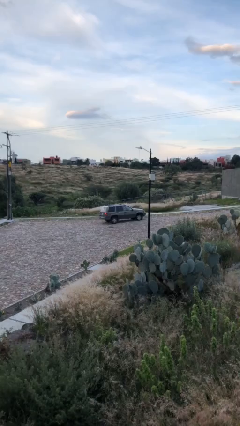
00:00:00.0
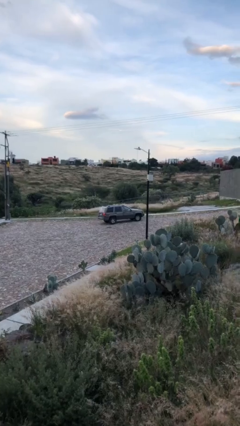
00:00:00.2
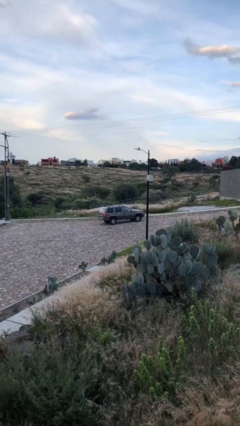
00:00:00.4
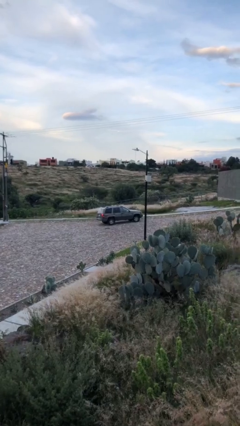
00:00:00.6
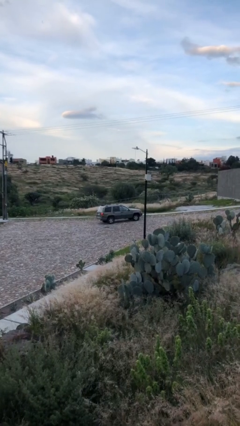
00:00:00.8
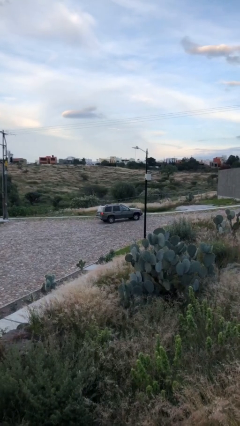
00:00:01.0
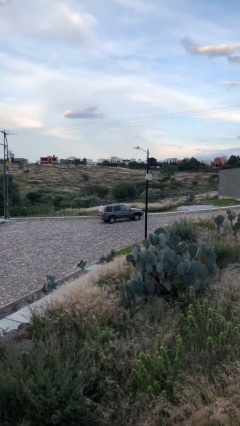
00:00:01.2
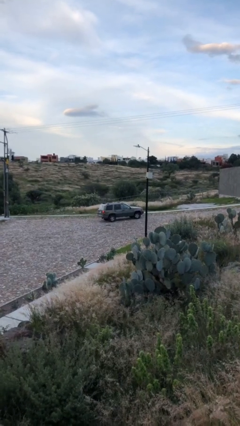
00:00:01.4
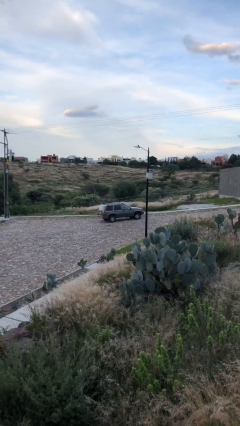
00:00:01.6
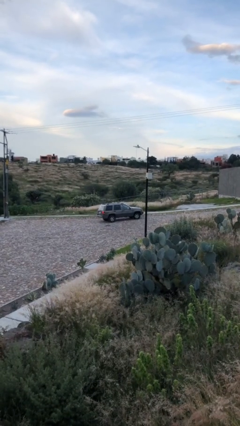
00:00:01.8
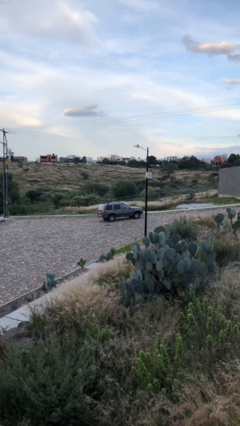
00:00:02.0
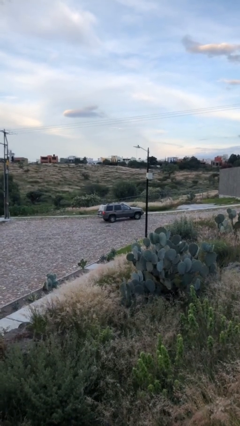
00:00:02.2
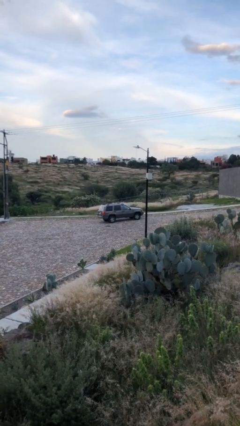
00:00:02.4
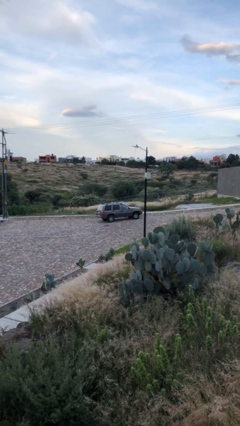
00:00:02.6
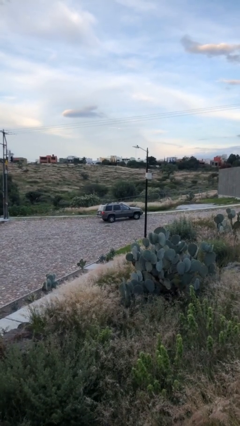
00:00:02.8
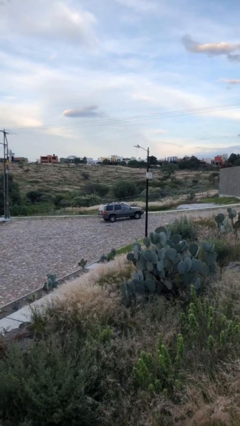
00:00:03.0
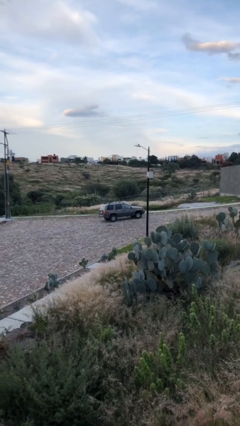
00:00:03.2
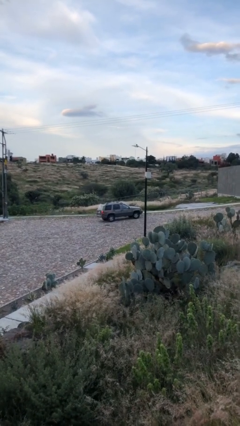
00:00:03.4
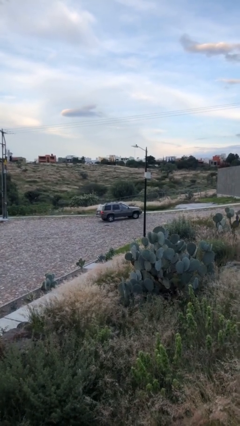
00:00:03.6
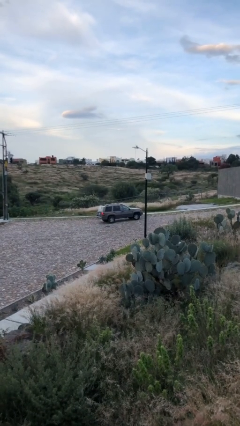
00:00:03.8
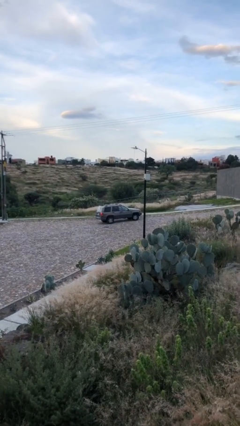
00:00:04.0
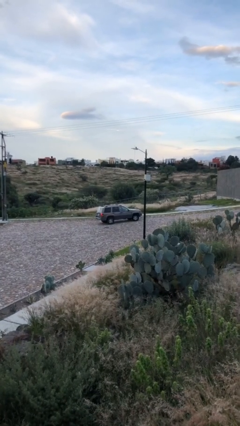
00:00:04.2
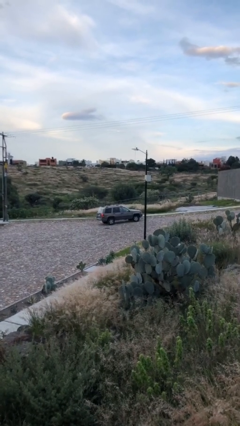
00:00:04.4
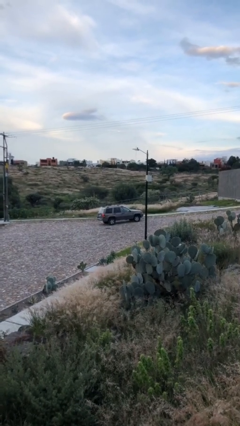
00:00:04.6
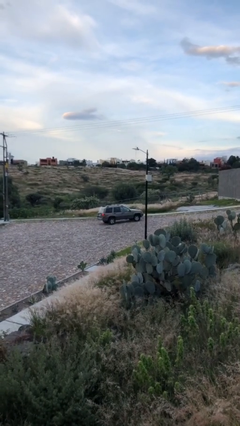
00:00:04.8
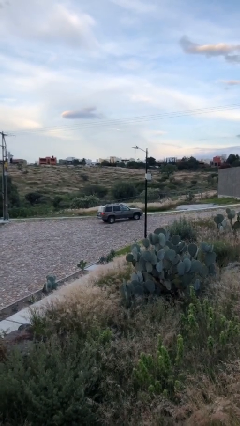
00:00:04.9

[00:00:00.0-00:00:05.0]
car picks up person

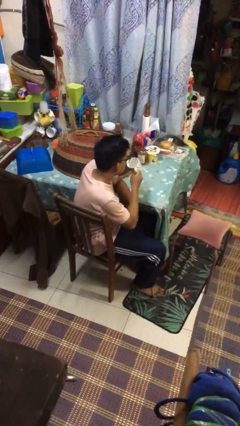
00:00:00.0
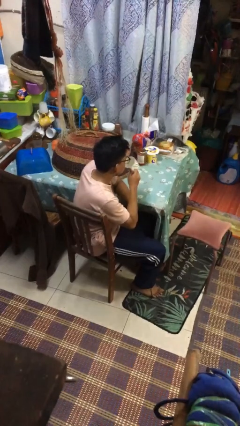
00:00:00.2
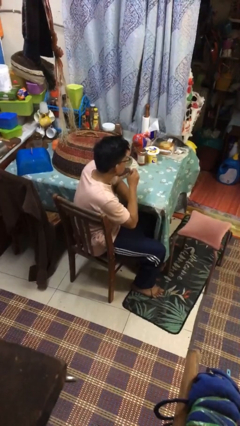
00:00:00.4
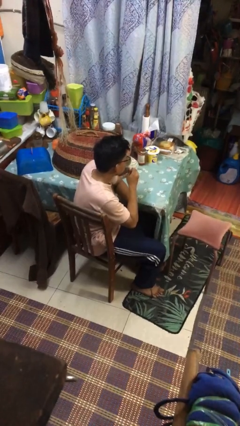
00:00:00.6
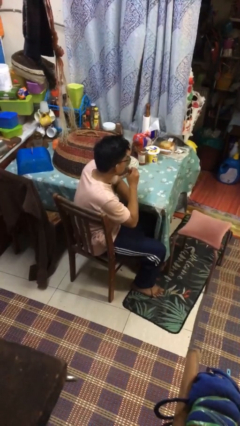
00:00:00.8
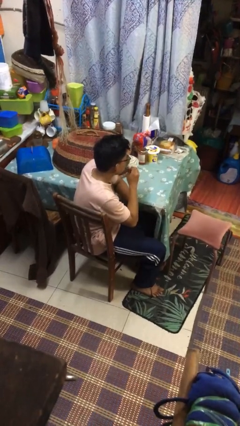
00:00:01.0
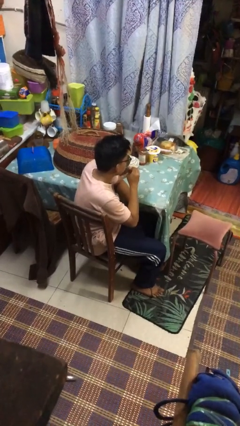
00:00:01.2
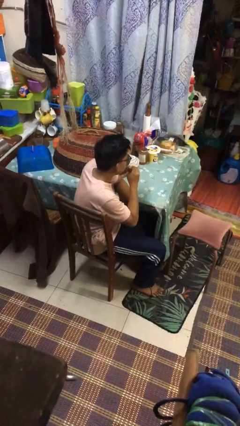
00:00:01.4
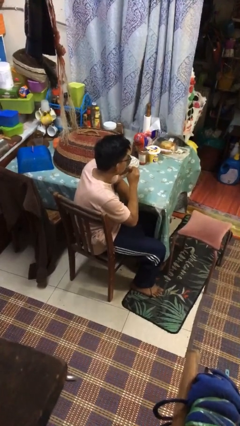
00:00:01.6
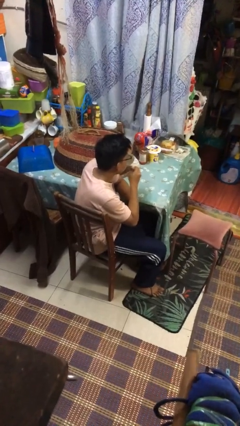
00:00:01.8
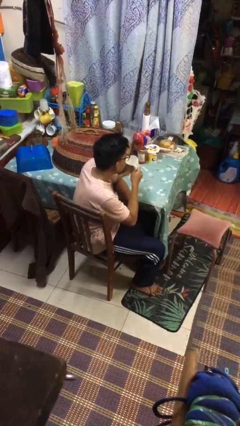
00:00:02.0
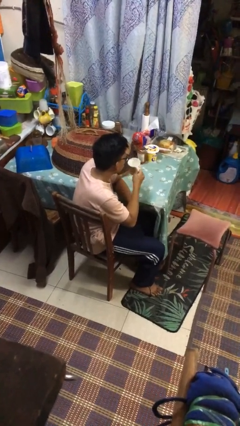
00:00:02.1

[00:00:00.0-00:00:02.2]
person drinks from mug

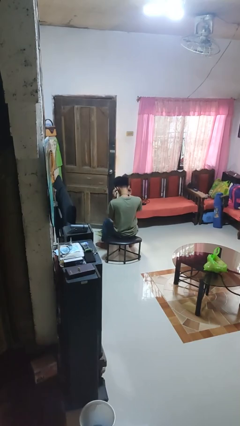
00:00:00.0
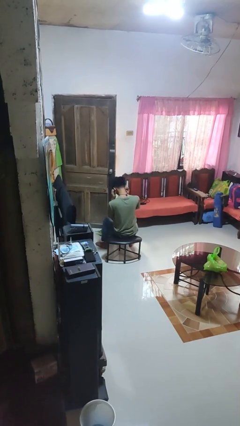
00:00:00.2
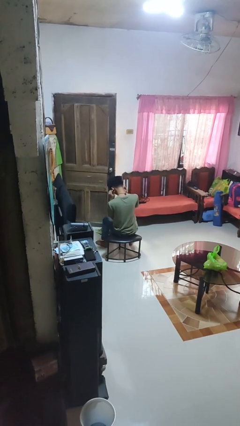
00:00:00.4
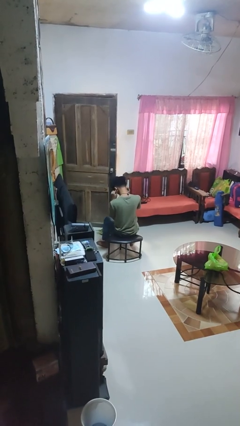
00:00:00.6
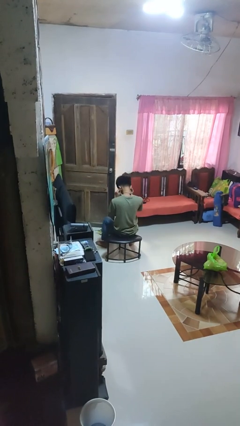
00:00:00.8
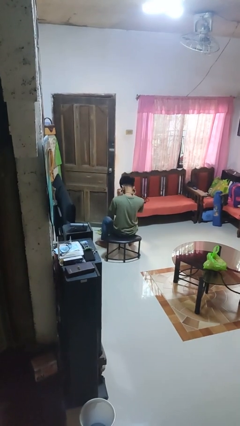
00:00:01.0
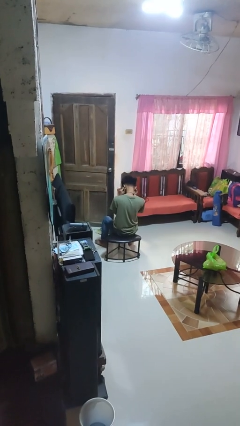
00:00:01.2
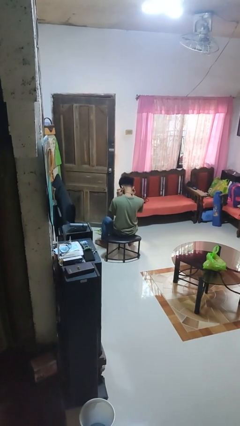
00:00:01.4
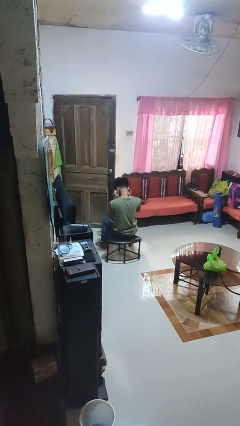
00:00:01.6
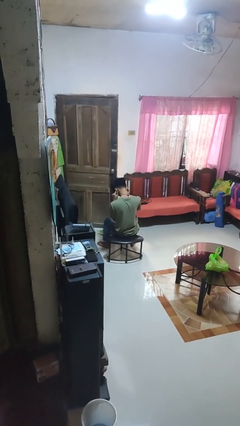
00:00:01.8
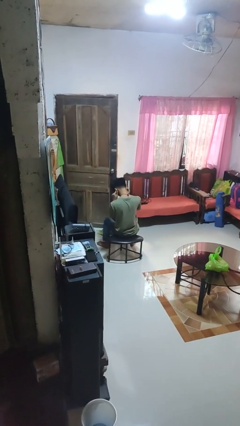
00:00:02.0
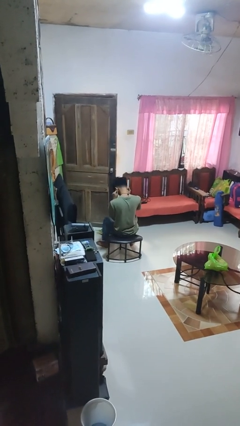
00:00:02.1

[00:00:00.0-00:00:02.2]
person puts fingers in ear

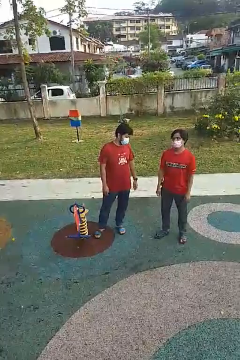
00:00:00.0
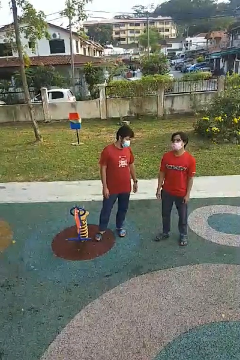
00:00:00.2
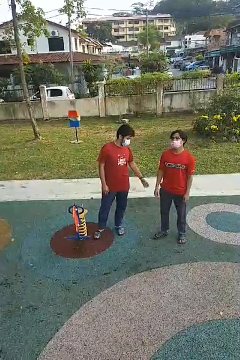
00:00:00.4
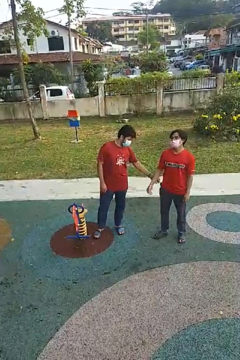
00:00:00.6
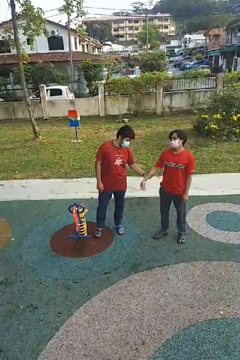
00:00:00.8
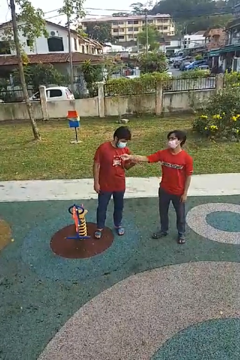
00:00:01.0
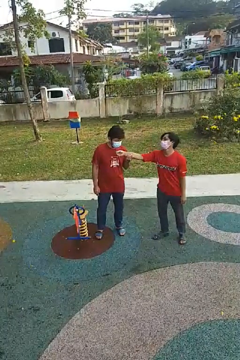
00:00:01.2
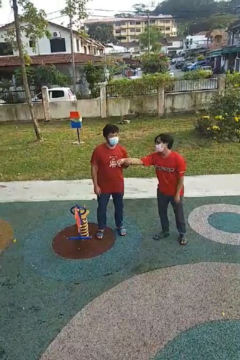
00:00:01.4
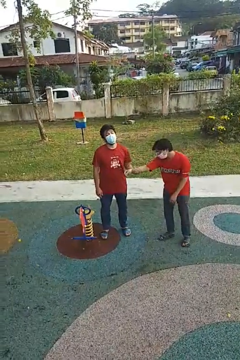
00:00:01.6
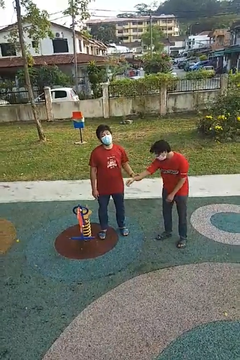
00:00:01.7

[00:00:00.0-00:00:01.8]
person grabs person by forearm

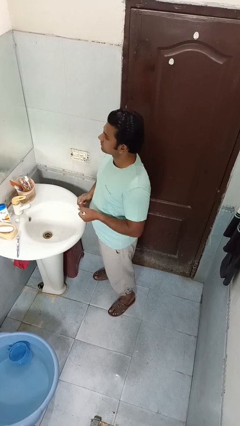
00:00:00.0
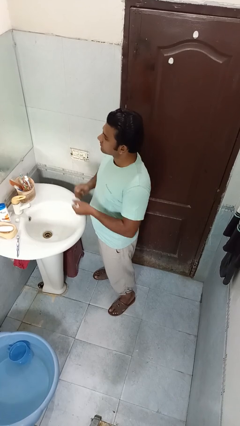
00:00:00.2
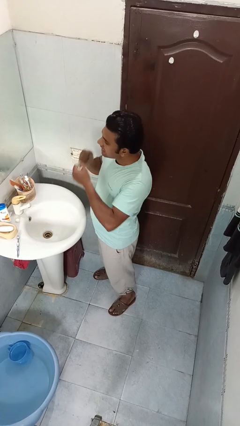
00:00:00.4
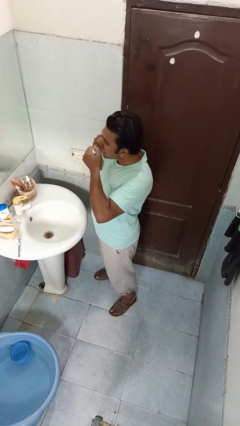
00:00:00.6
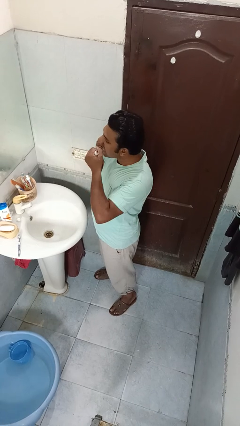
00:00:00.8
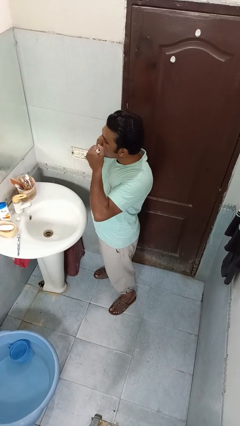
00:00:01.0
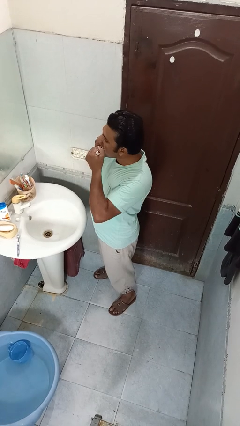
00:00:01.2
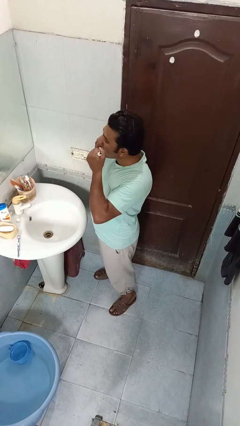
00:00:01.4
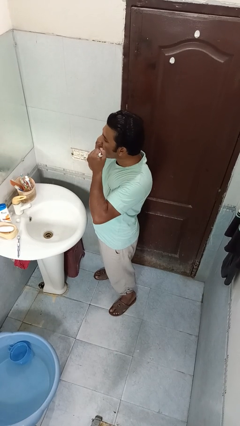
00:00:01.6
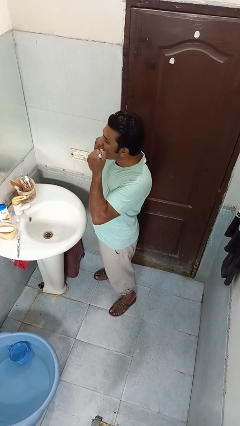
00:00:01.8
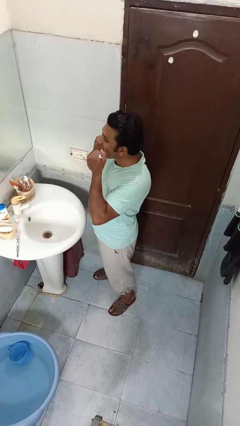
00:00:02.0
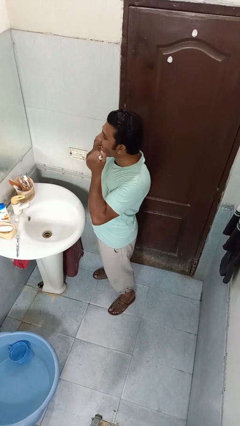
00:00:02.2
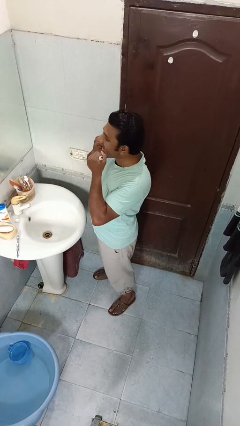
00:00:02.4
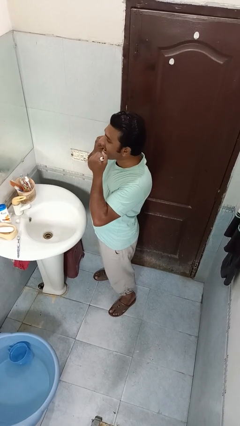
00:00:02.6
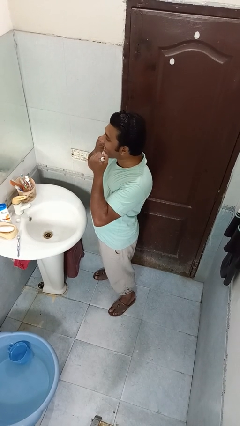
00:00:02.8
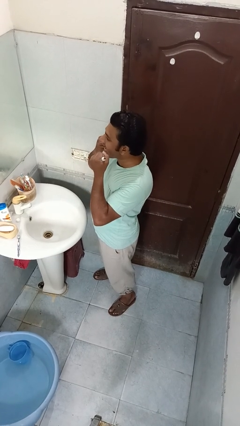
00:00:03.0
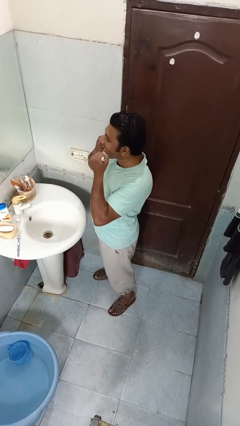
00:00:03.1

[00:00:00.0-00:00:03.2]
person flosses

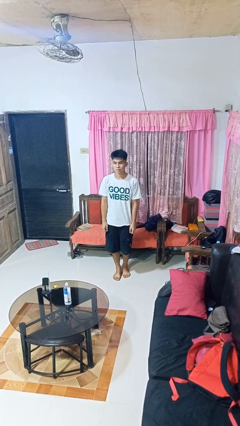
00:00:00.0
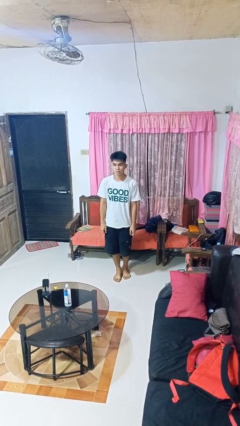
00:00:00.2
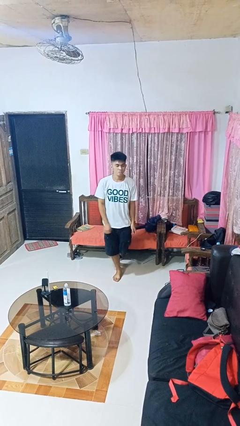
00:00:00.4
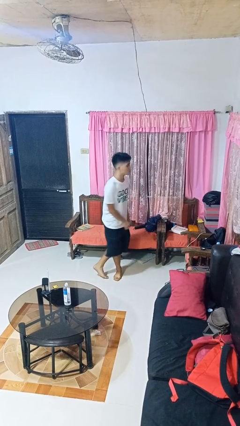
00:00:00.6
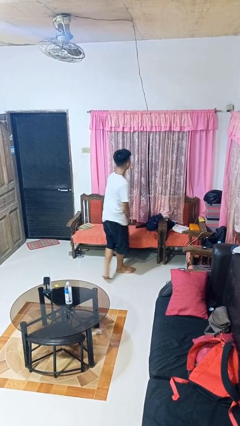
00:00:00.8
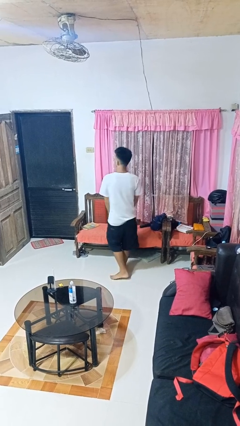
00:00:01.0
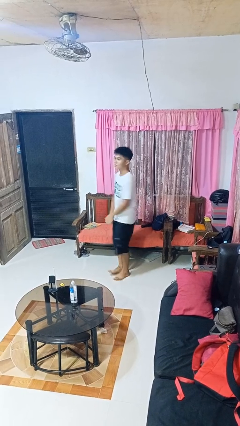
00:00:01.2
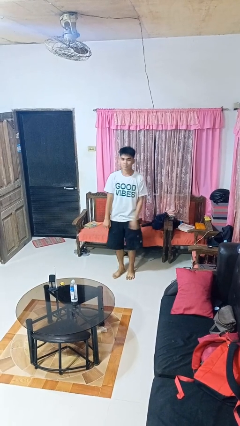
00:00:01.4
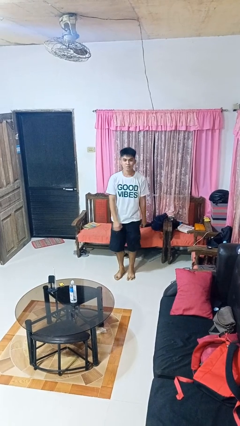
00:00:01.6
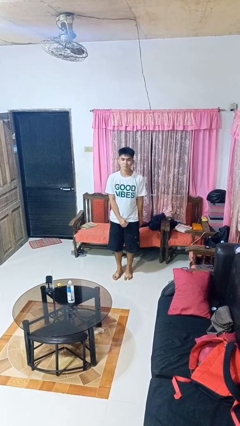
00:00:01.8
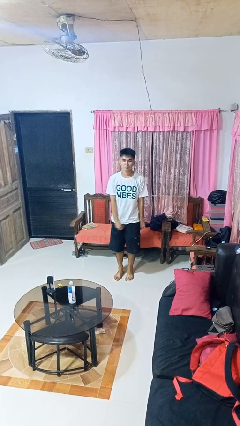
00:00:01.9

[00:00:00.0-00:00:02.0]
person twirls

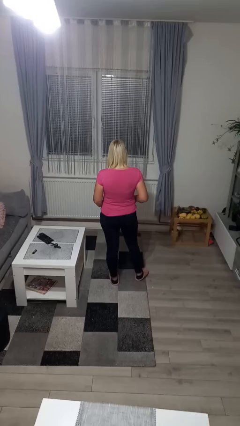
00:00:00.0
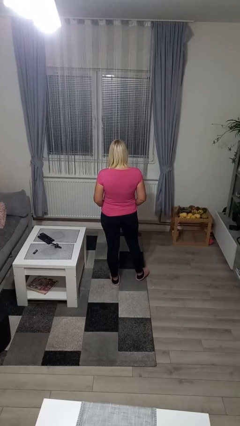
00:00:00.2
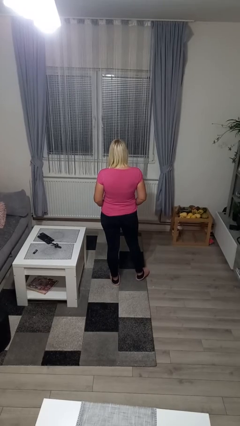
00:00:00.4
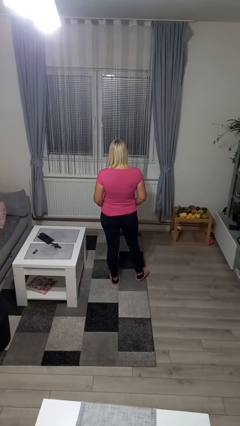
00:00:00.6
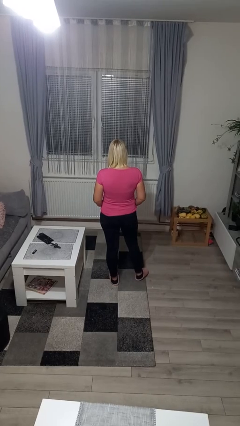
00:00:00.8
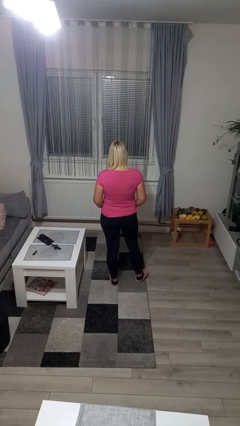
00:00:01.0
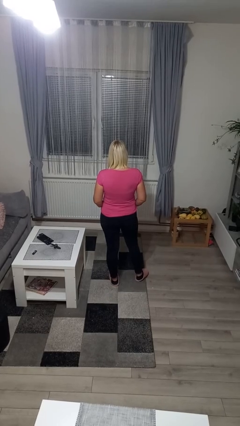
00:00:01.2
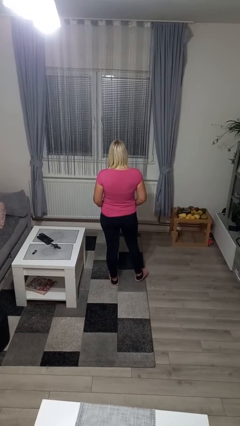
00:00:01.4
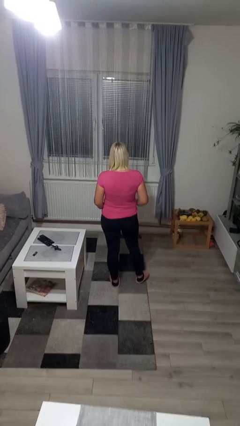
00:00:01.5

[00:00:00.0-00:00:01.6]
person puts hands in back pockets
